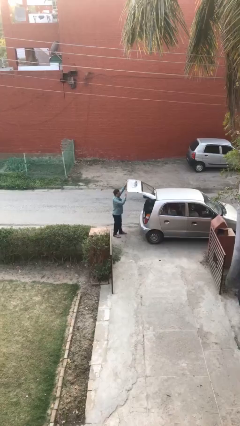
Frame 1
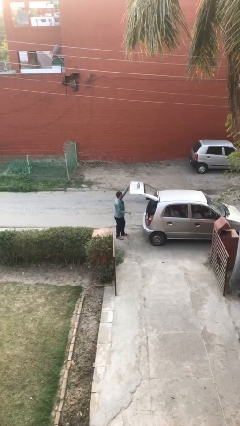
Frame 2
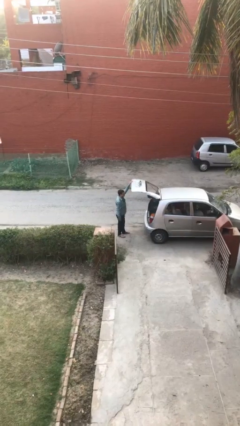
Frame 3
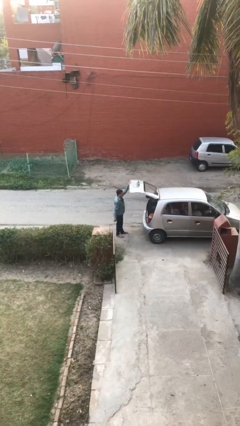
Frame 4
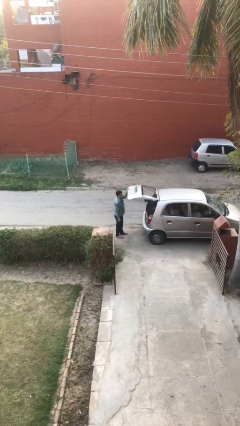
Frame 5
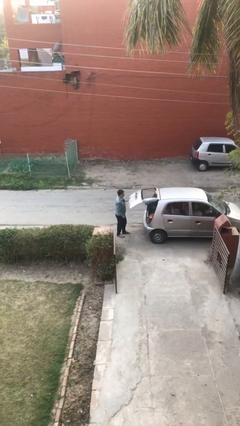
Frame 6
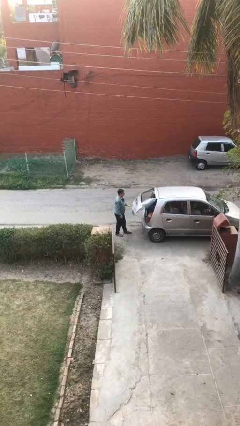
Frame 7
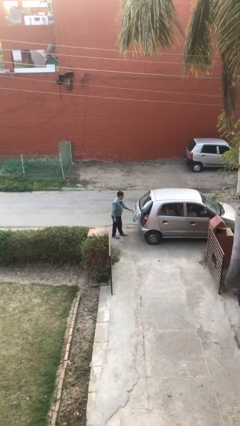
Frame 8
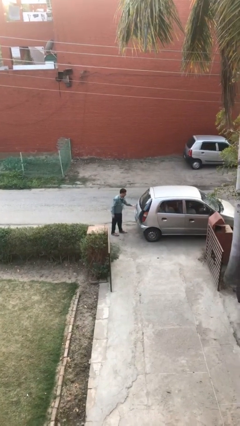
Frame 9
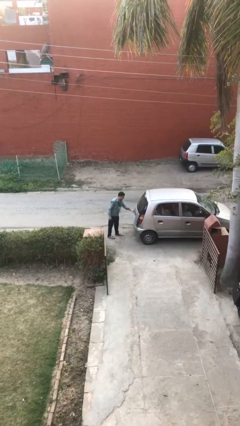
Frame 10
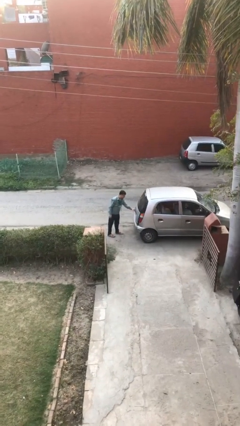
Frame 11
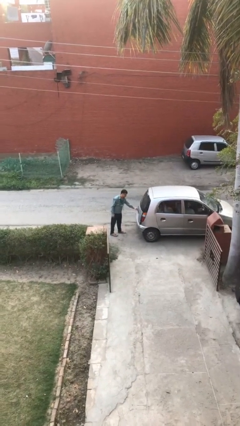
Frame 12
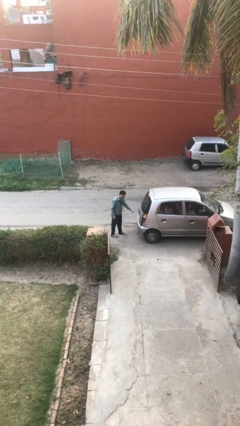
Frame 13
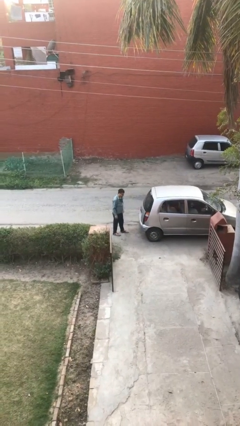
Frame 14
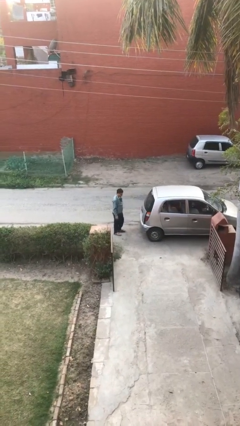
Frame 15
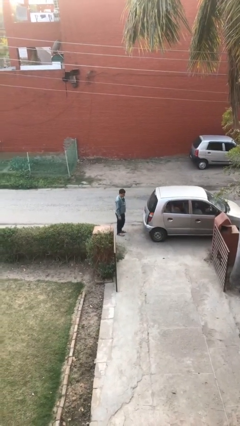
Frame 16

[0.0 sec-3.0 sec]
person closes car trunk

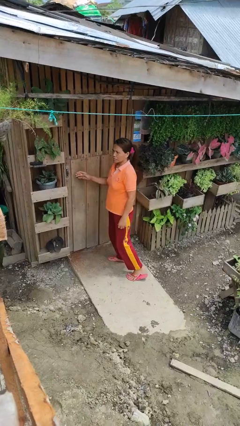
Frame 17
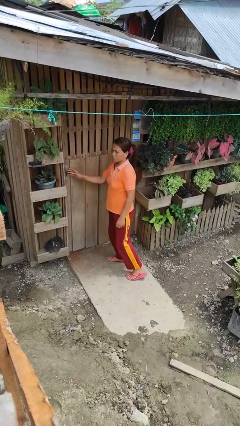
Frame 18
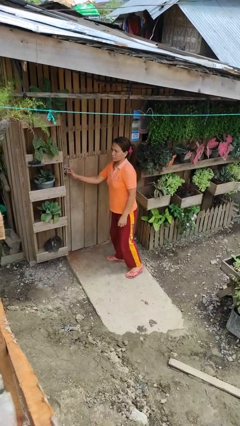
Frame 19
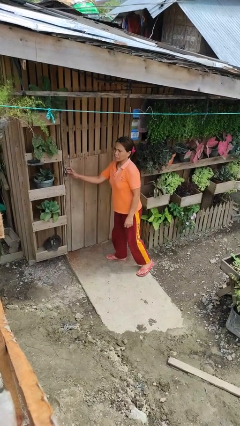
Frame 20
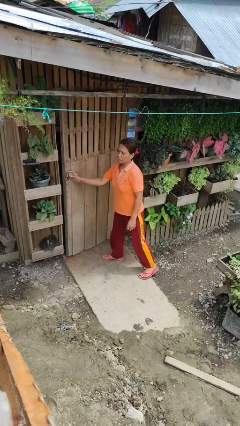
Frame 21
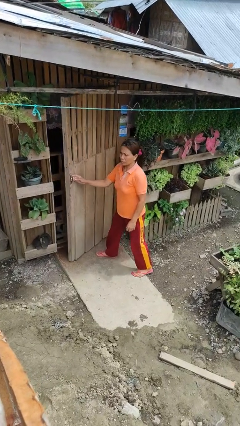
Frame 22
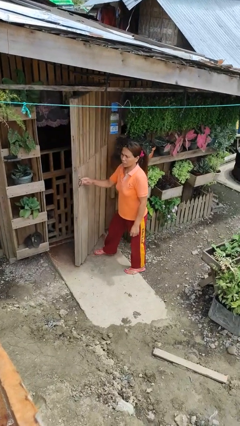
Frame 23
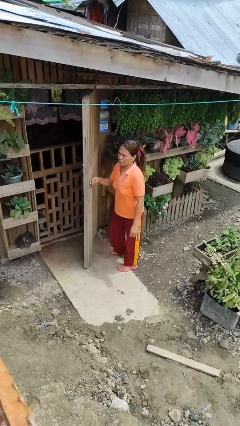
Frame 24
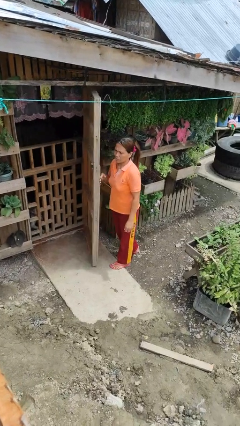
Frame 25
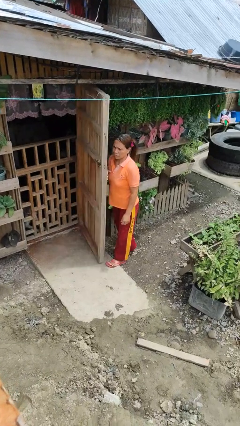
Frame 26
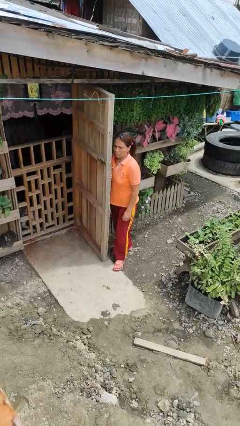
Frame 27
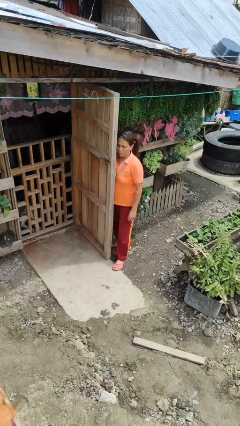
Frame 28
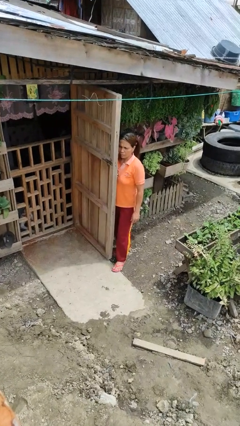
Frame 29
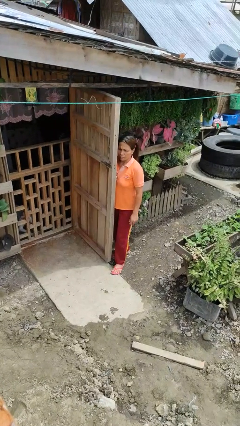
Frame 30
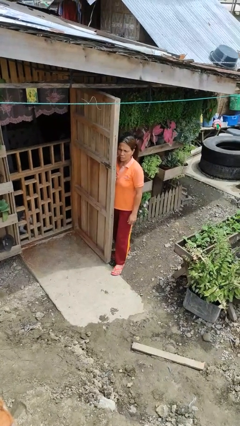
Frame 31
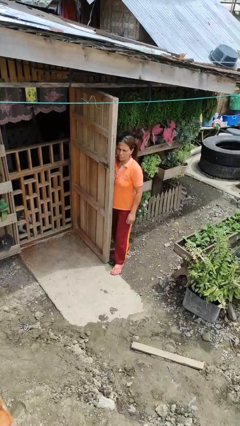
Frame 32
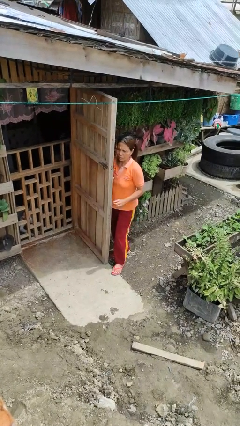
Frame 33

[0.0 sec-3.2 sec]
person opens facility door

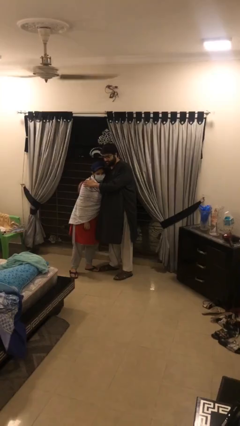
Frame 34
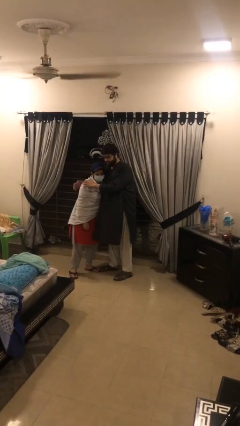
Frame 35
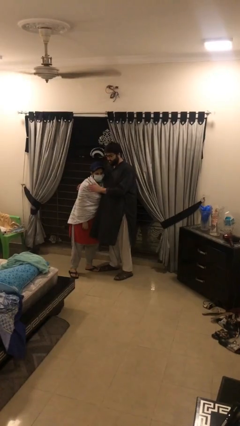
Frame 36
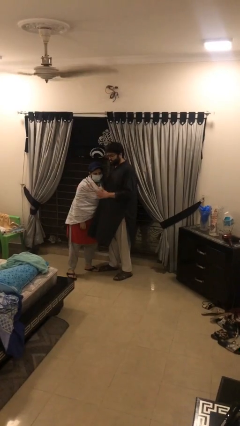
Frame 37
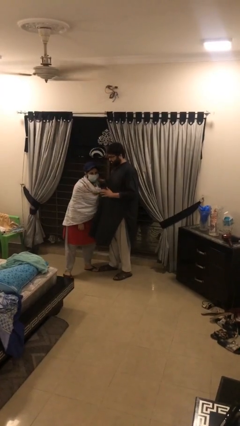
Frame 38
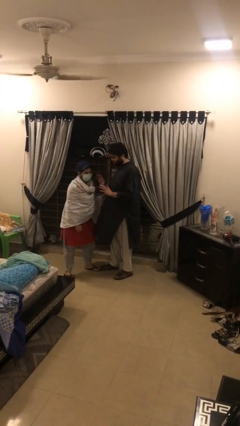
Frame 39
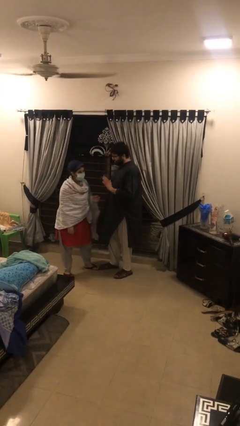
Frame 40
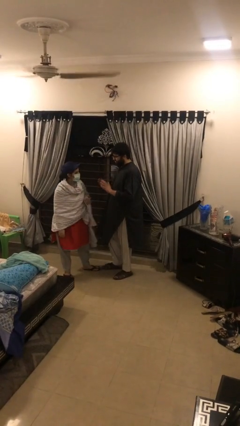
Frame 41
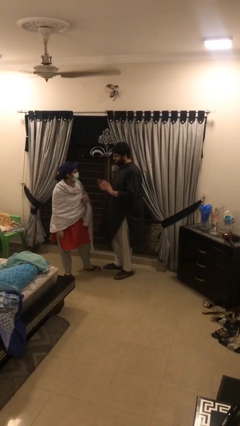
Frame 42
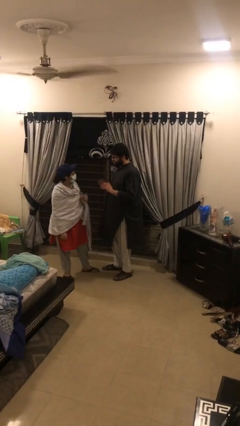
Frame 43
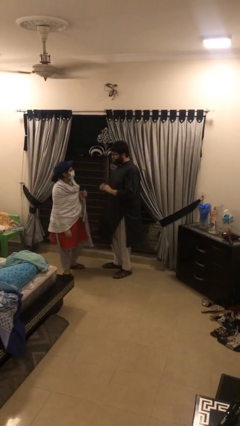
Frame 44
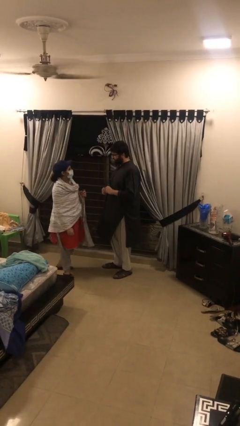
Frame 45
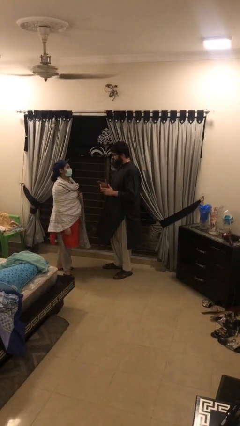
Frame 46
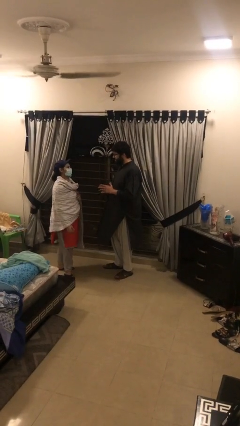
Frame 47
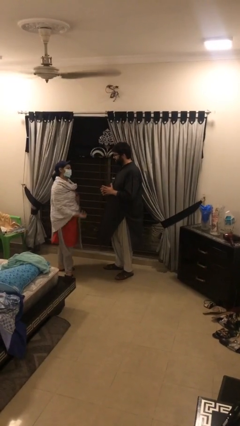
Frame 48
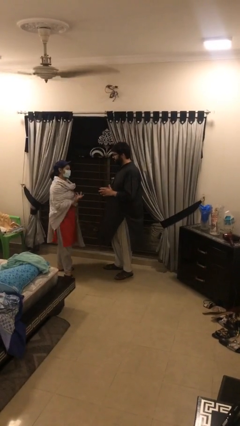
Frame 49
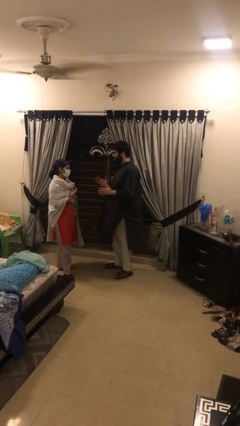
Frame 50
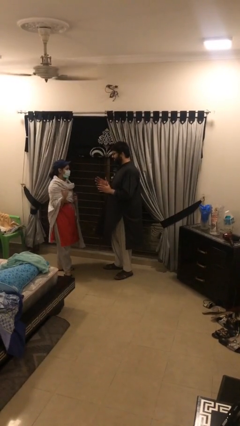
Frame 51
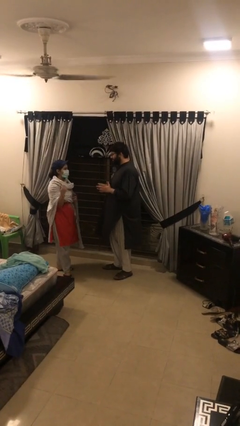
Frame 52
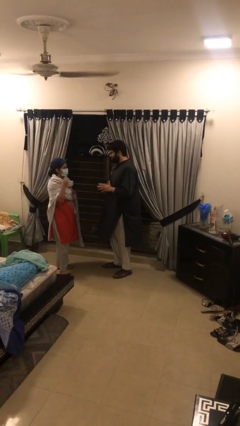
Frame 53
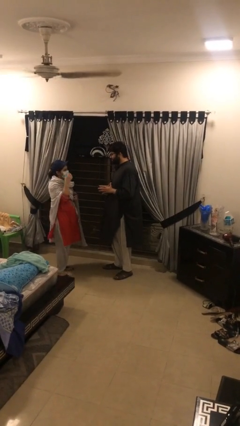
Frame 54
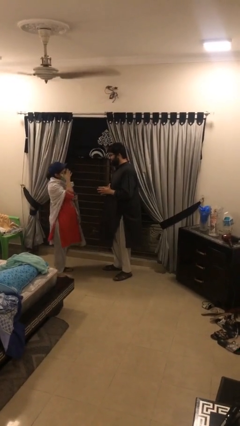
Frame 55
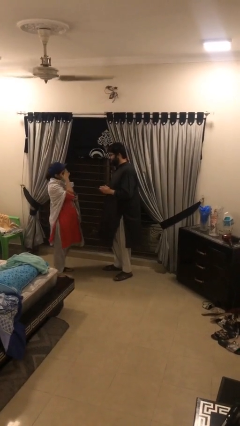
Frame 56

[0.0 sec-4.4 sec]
person talks to person

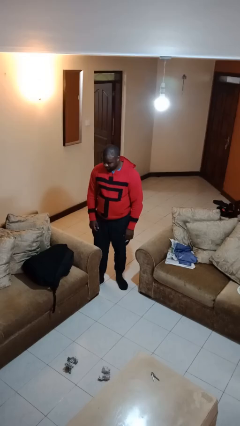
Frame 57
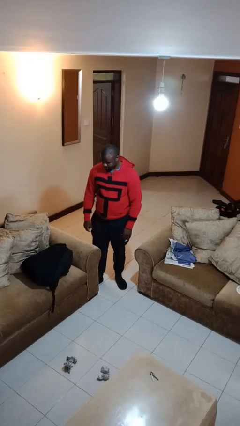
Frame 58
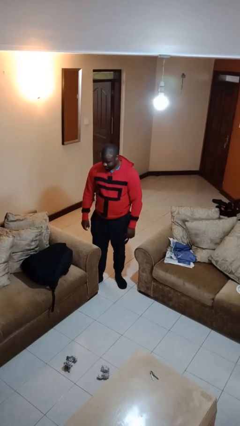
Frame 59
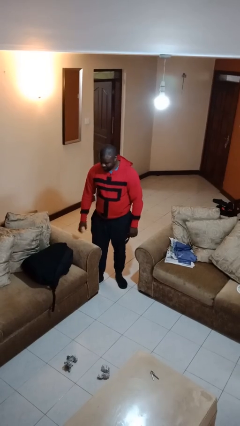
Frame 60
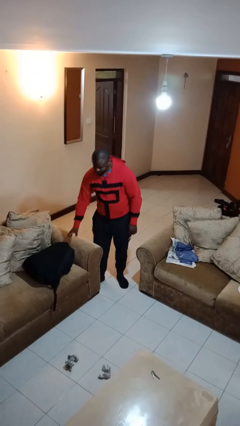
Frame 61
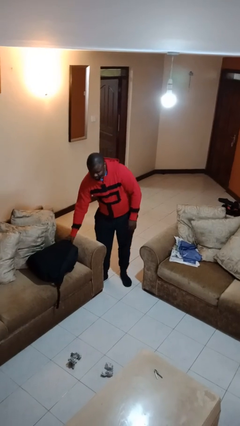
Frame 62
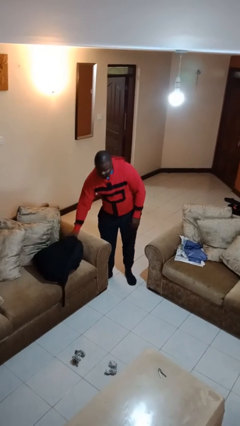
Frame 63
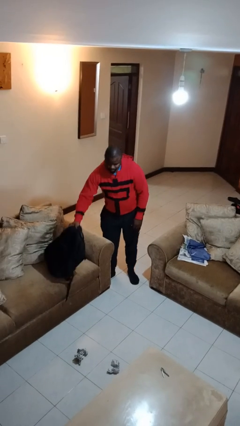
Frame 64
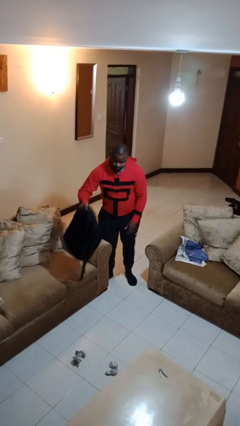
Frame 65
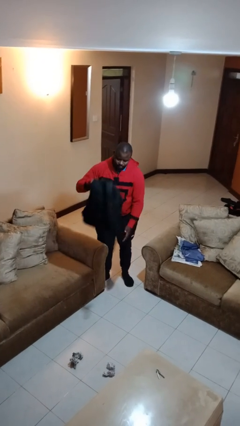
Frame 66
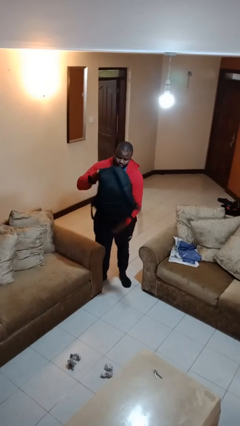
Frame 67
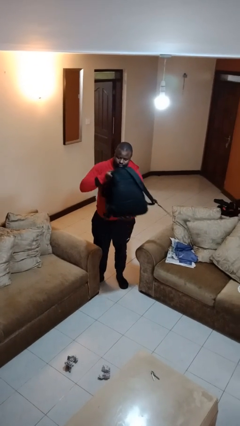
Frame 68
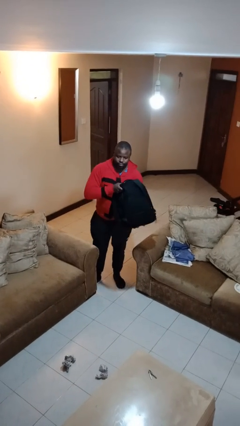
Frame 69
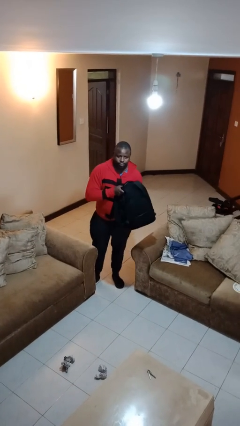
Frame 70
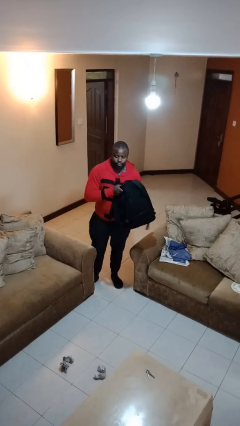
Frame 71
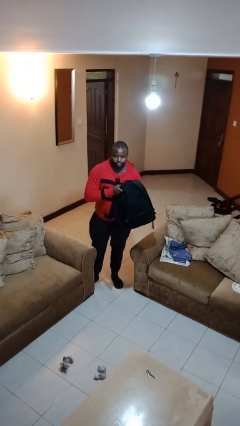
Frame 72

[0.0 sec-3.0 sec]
person picks up object from couch

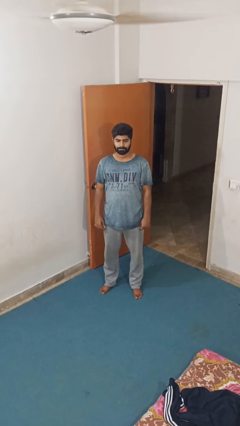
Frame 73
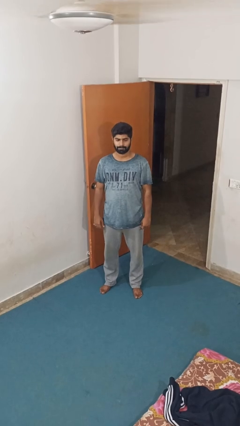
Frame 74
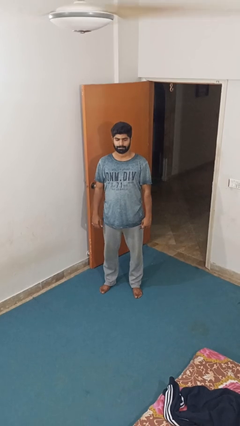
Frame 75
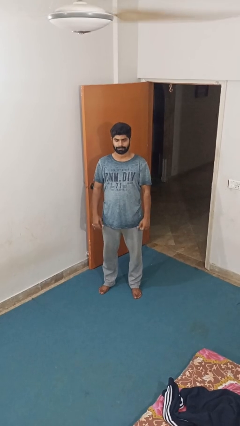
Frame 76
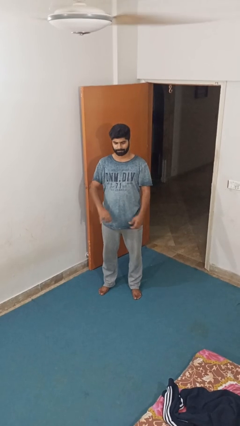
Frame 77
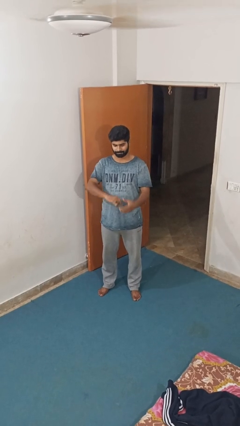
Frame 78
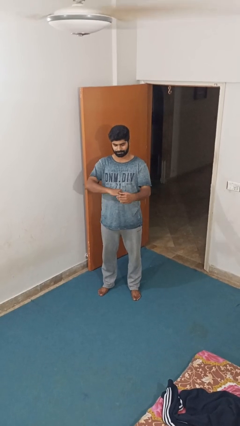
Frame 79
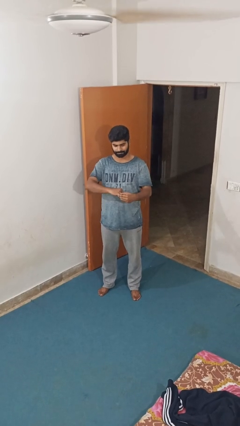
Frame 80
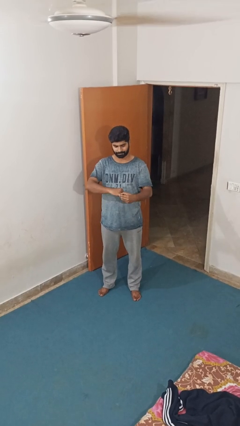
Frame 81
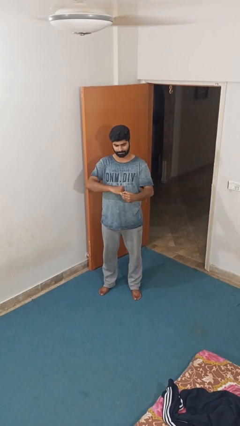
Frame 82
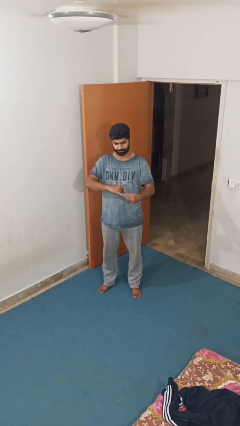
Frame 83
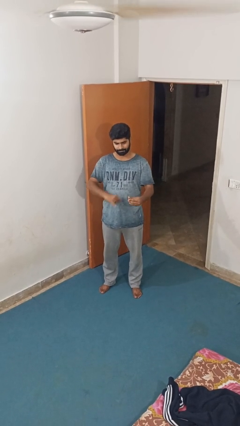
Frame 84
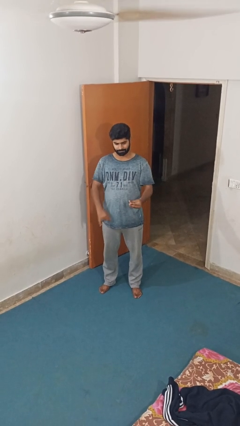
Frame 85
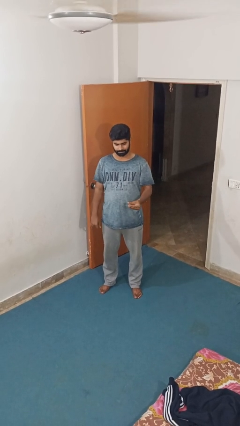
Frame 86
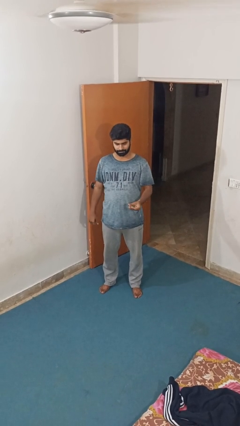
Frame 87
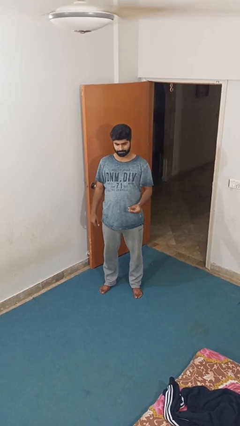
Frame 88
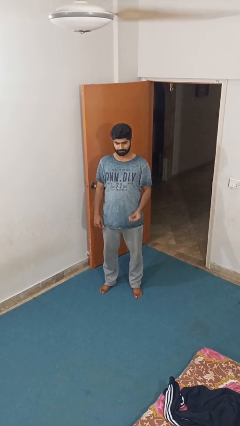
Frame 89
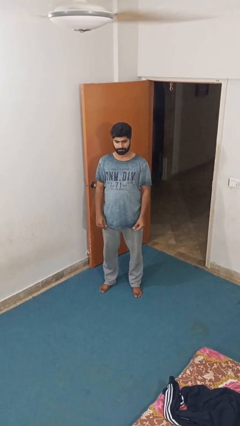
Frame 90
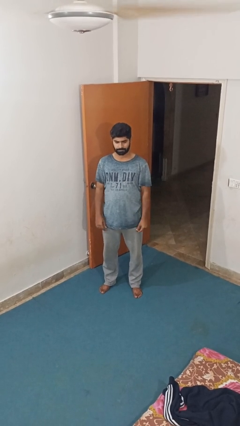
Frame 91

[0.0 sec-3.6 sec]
person takes off ring

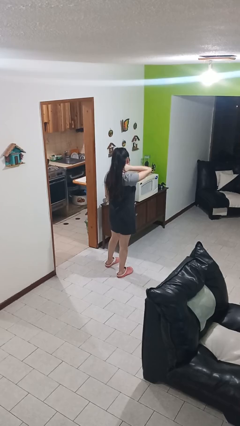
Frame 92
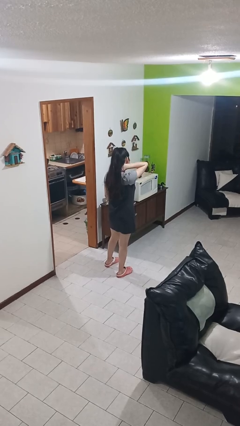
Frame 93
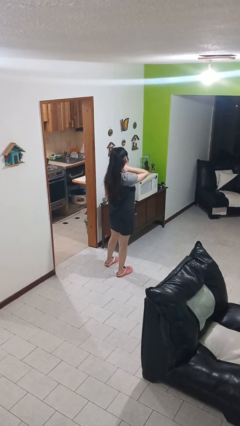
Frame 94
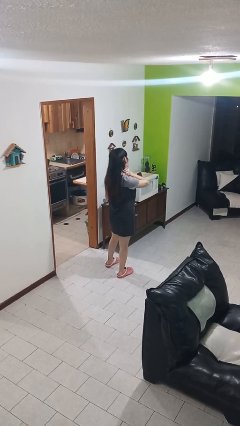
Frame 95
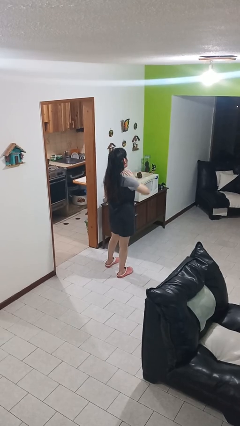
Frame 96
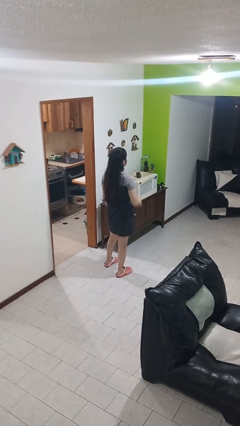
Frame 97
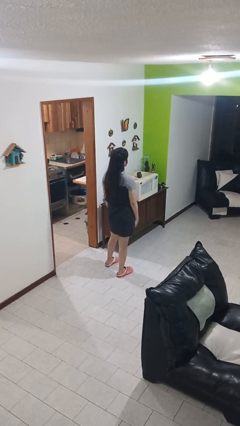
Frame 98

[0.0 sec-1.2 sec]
person rubs neck
